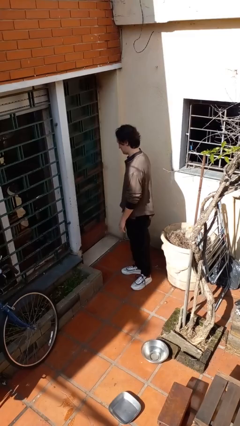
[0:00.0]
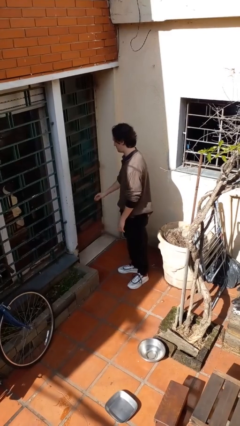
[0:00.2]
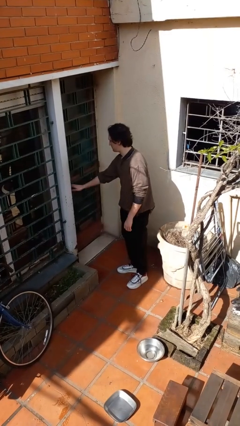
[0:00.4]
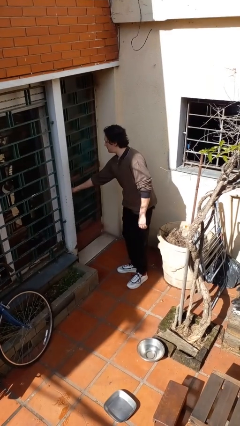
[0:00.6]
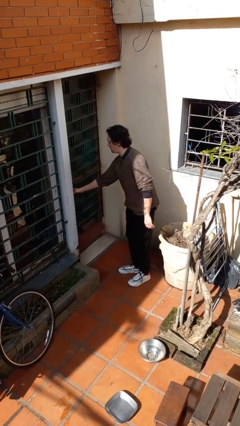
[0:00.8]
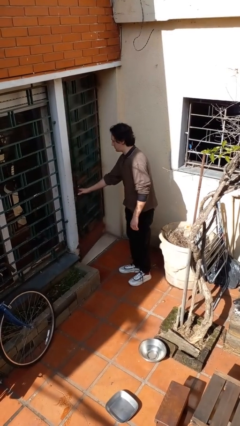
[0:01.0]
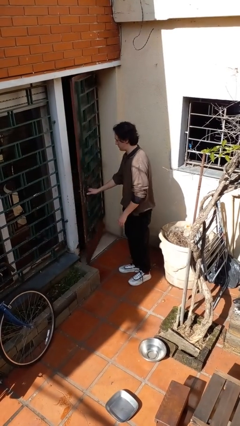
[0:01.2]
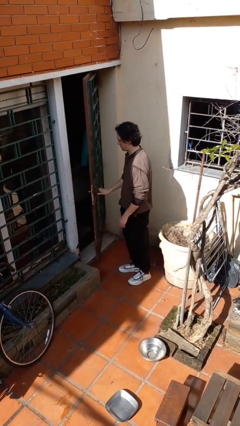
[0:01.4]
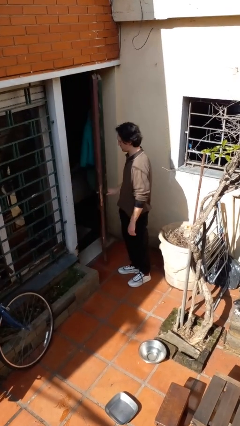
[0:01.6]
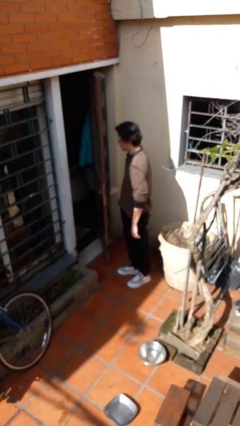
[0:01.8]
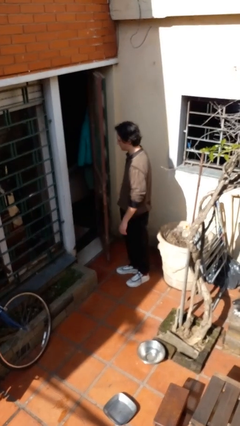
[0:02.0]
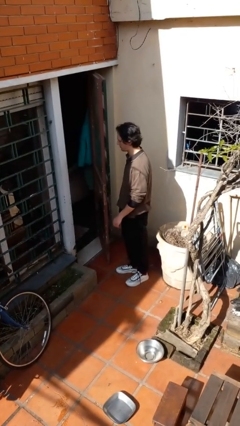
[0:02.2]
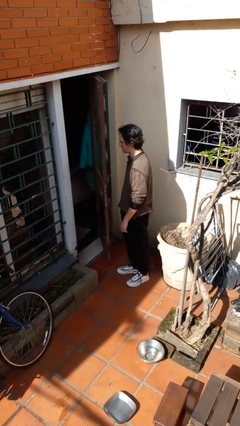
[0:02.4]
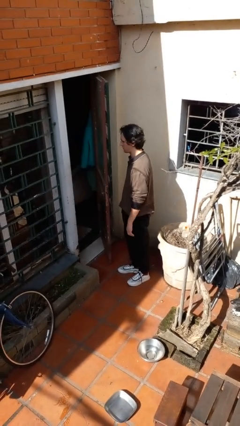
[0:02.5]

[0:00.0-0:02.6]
person opens facility door

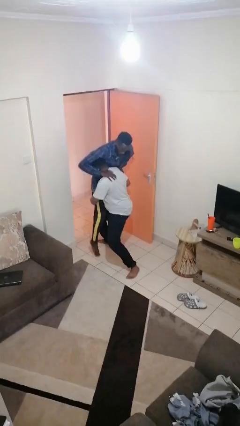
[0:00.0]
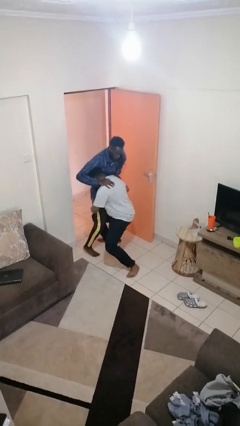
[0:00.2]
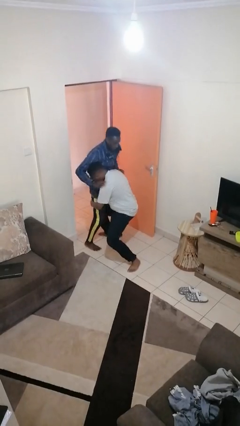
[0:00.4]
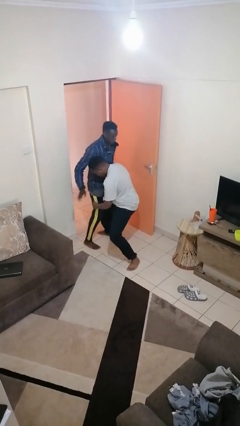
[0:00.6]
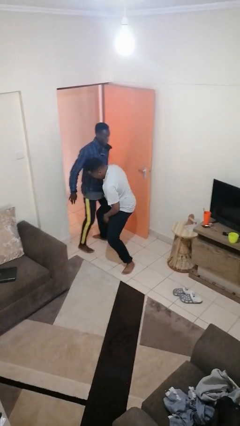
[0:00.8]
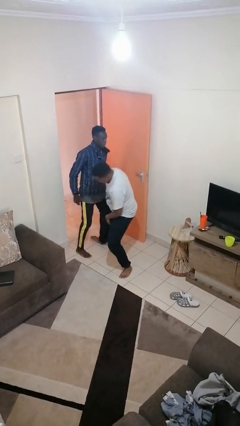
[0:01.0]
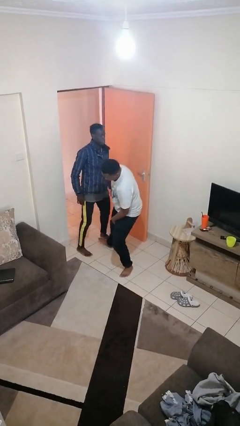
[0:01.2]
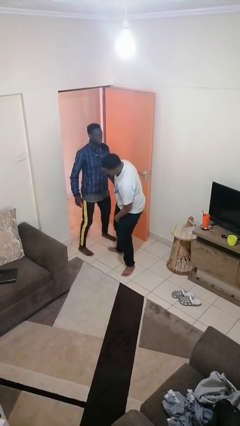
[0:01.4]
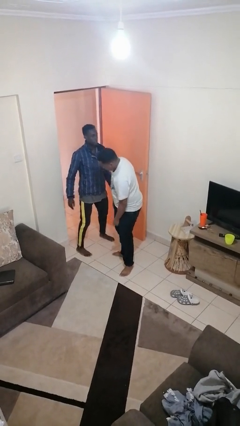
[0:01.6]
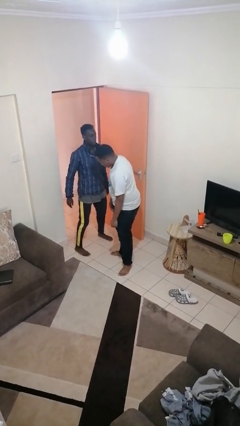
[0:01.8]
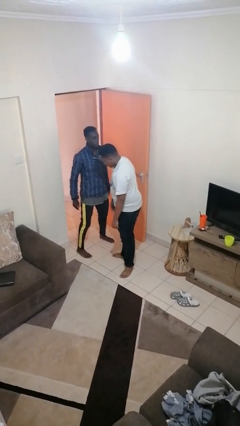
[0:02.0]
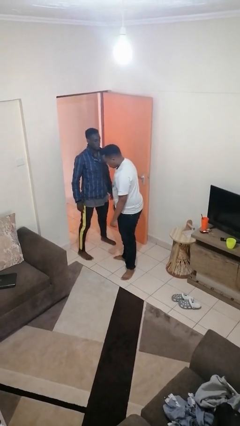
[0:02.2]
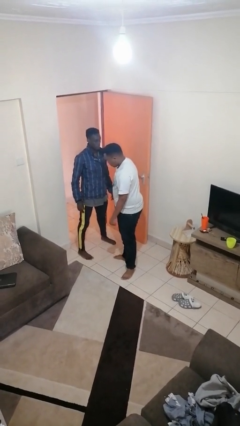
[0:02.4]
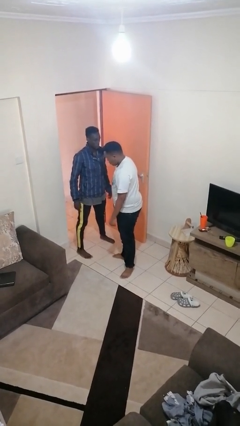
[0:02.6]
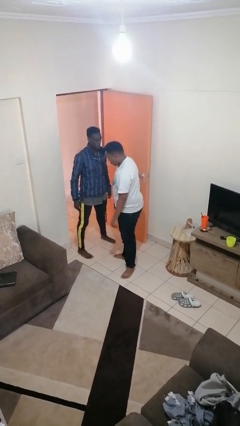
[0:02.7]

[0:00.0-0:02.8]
person puts down person

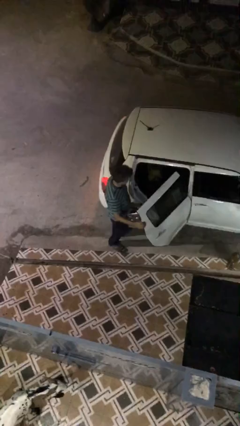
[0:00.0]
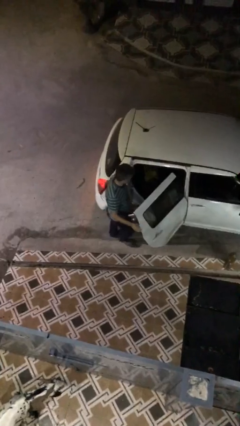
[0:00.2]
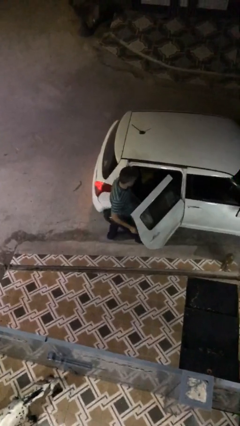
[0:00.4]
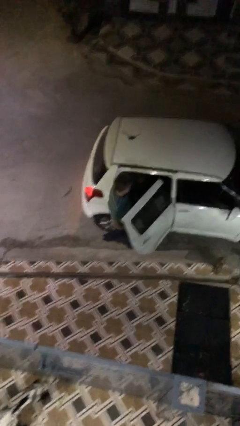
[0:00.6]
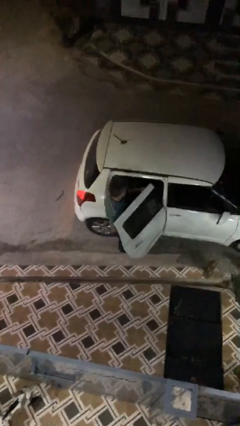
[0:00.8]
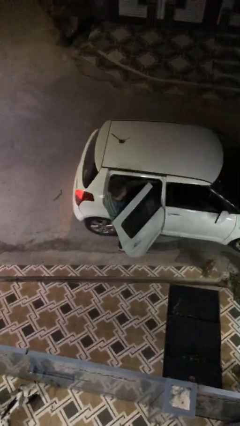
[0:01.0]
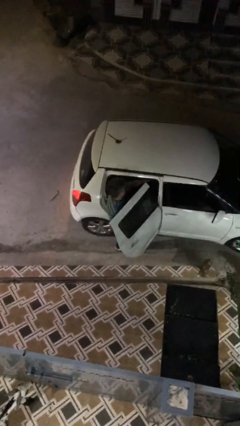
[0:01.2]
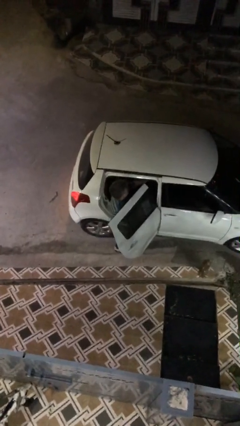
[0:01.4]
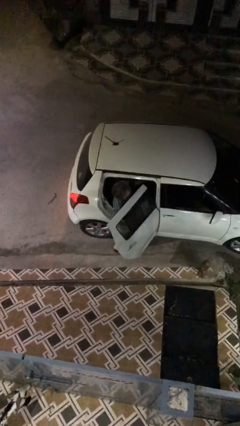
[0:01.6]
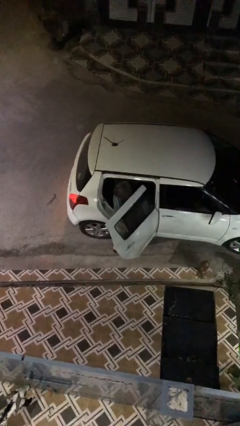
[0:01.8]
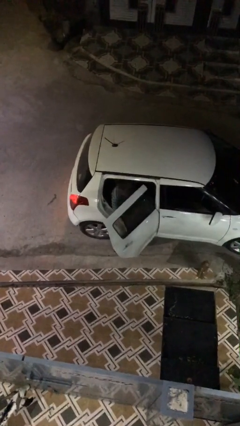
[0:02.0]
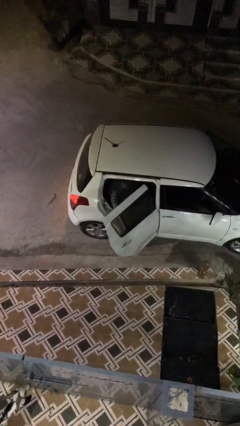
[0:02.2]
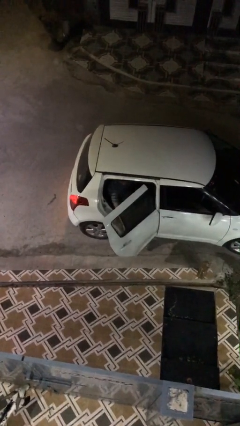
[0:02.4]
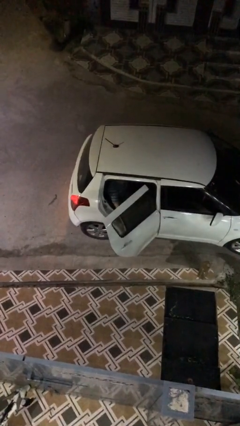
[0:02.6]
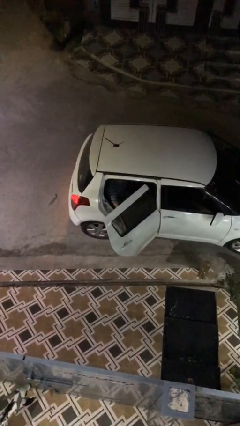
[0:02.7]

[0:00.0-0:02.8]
person enters car

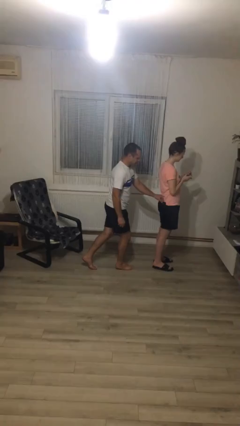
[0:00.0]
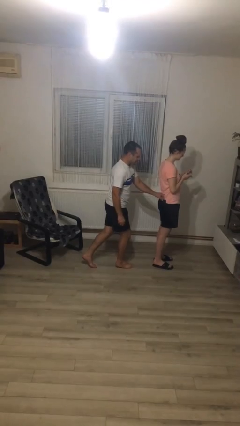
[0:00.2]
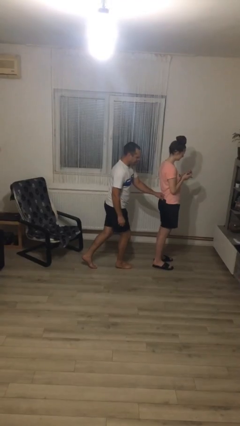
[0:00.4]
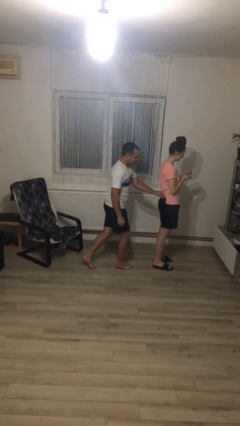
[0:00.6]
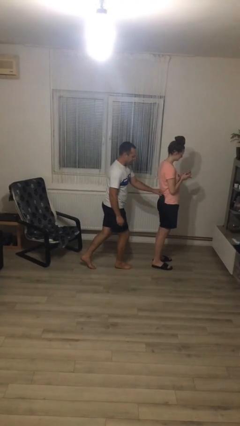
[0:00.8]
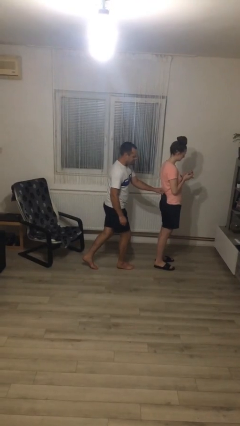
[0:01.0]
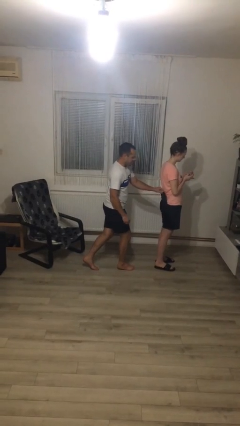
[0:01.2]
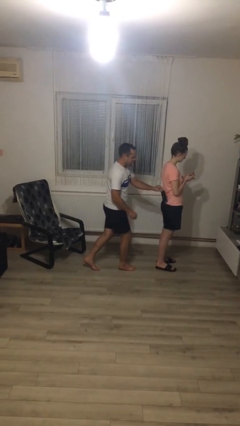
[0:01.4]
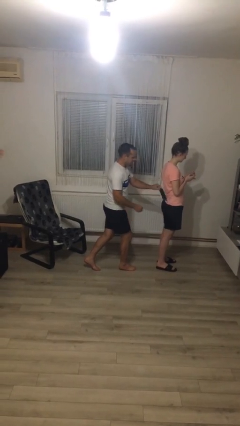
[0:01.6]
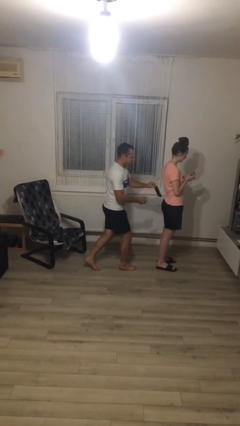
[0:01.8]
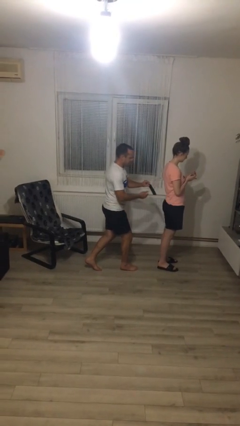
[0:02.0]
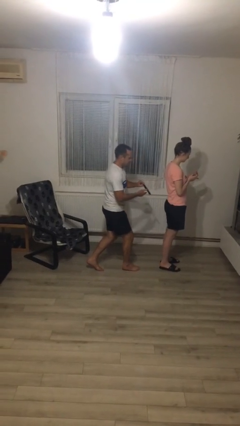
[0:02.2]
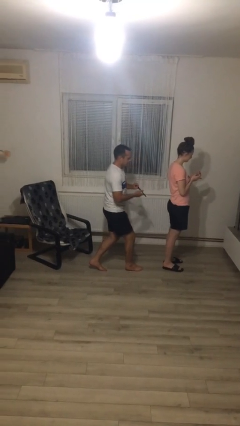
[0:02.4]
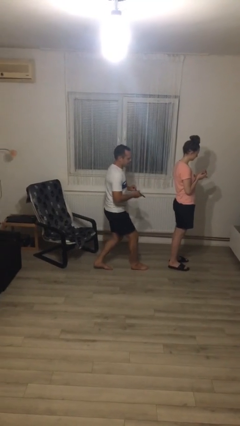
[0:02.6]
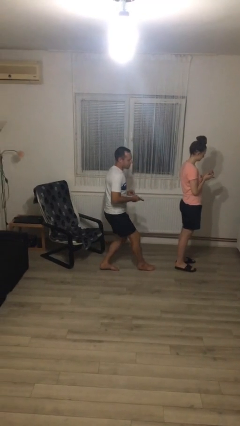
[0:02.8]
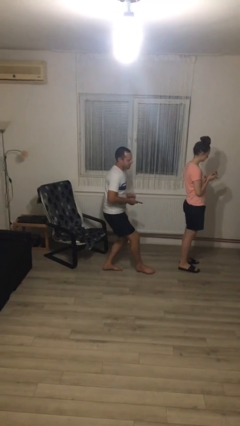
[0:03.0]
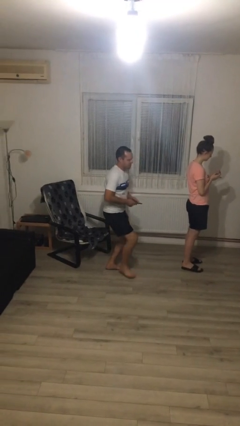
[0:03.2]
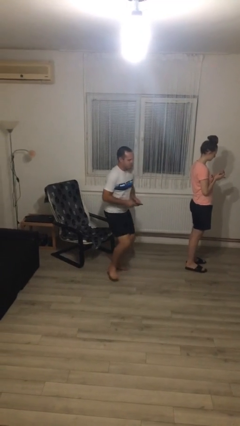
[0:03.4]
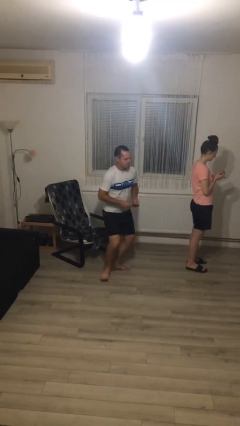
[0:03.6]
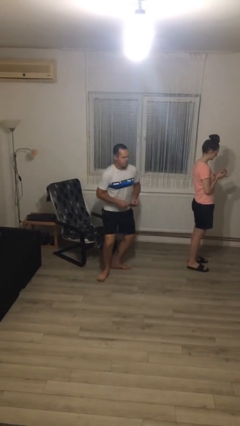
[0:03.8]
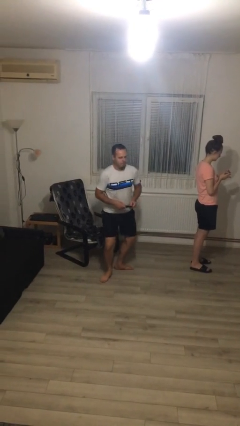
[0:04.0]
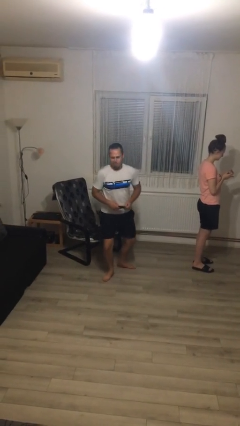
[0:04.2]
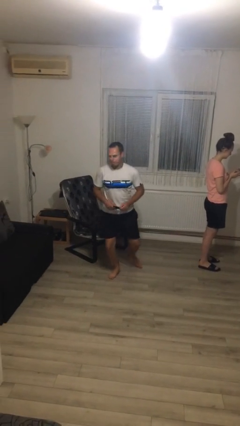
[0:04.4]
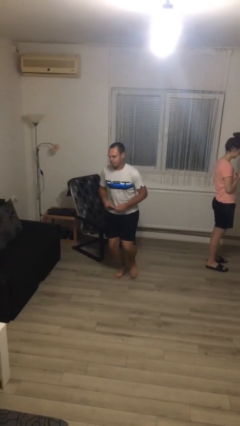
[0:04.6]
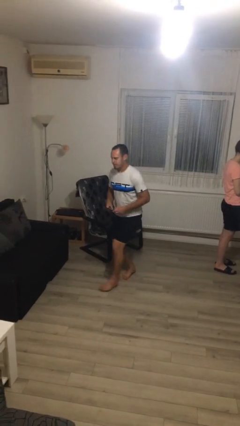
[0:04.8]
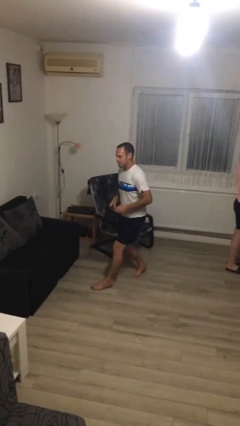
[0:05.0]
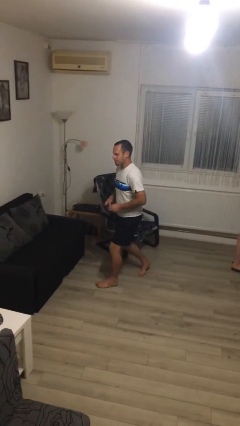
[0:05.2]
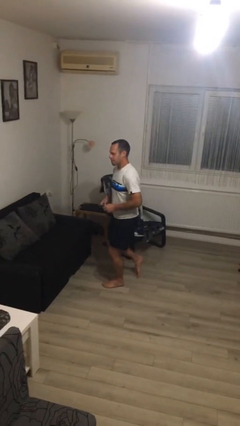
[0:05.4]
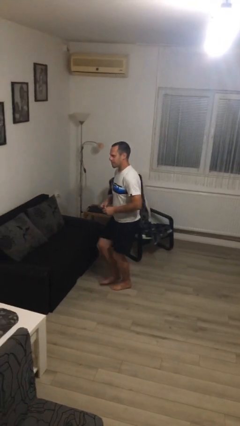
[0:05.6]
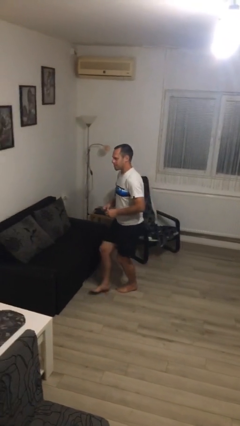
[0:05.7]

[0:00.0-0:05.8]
person steals object from person

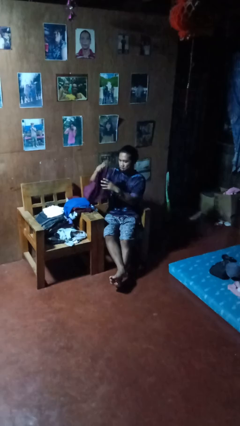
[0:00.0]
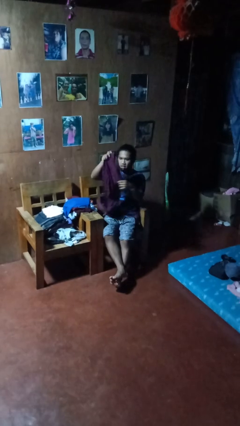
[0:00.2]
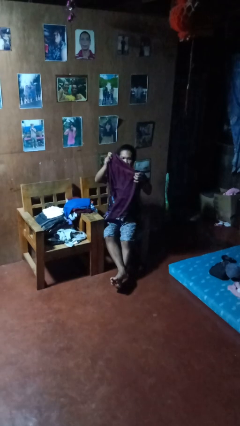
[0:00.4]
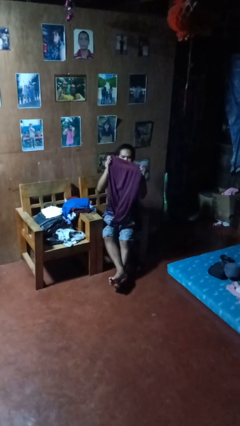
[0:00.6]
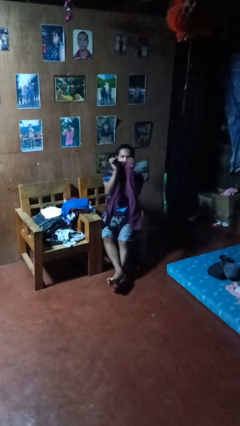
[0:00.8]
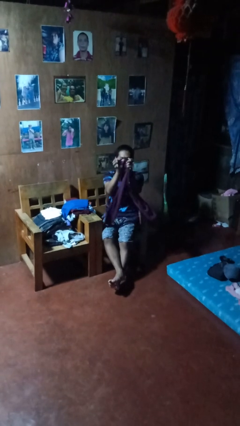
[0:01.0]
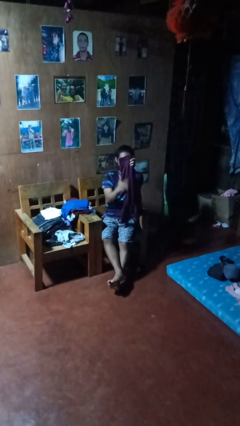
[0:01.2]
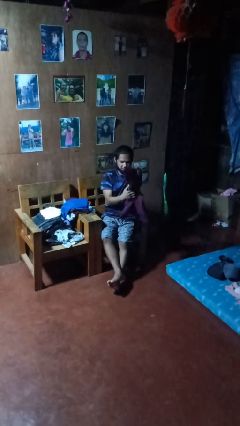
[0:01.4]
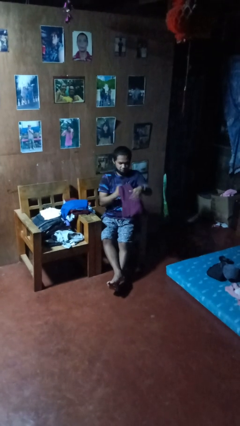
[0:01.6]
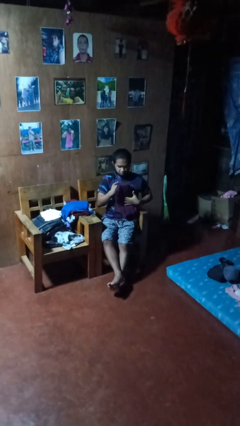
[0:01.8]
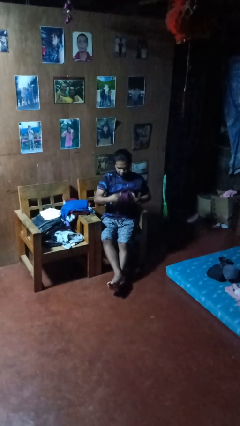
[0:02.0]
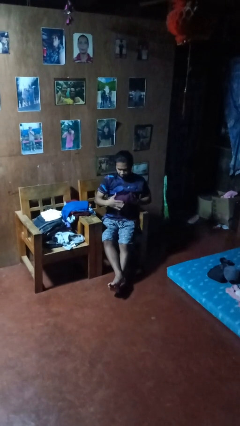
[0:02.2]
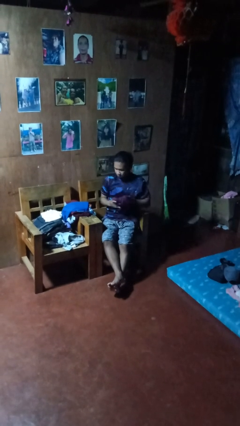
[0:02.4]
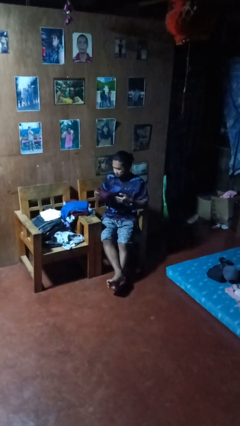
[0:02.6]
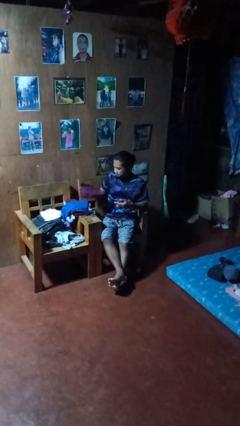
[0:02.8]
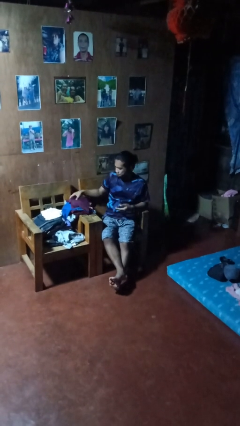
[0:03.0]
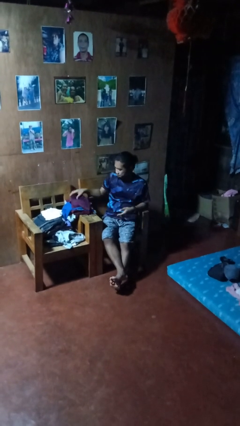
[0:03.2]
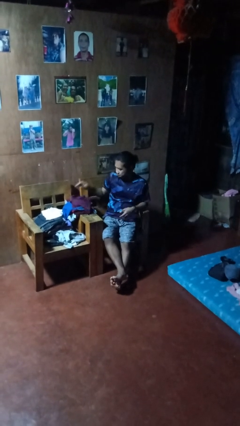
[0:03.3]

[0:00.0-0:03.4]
person folds pants
